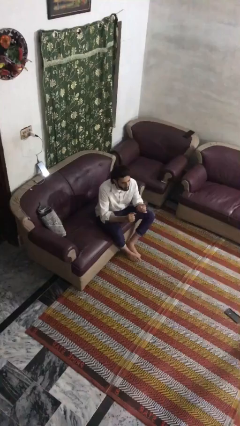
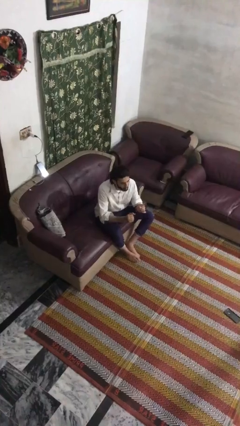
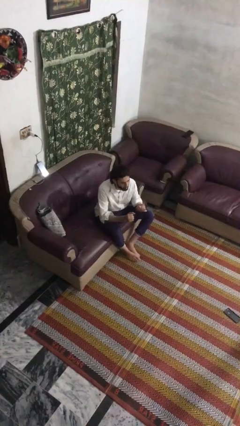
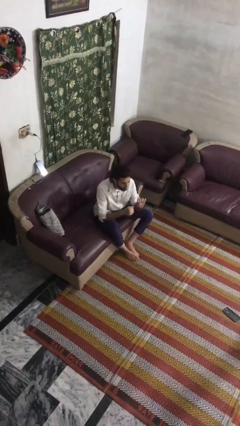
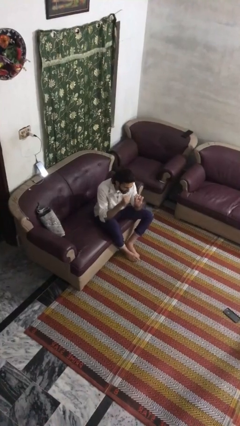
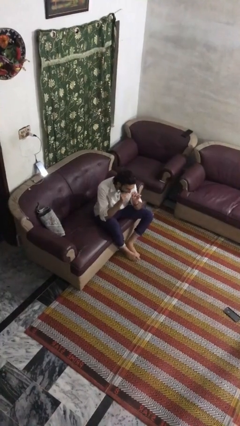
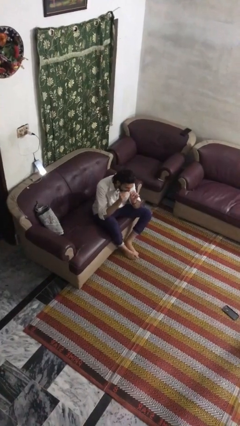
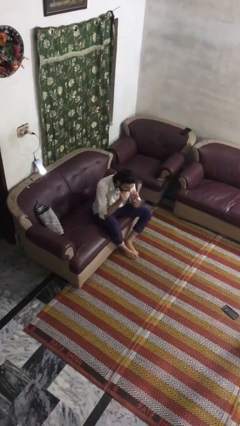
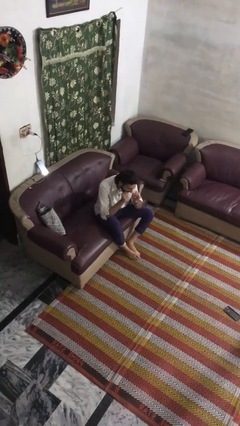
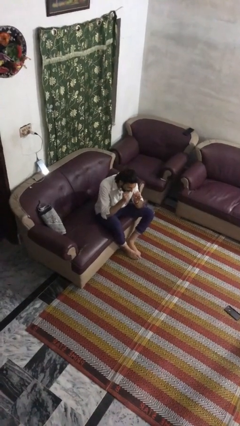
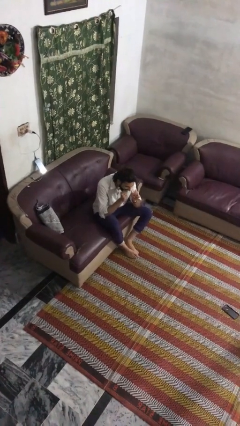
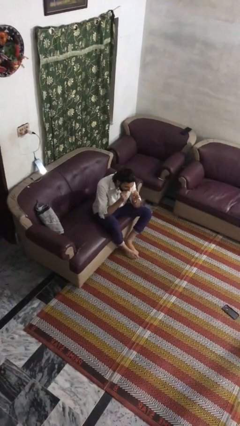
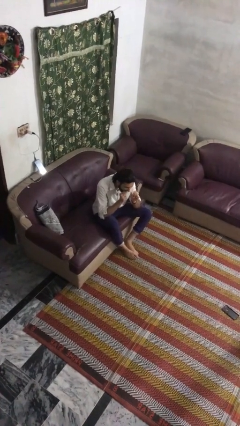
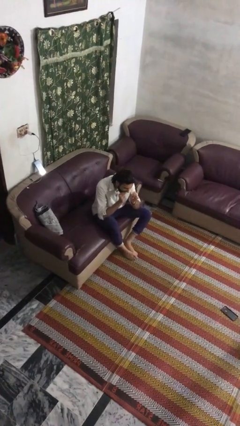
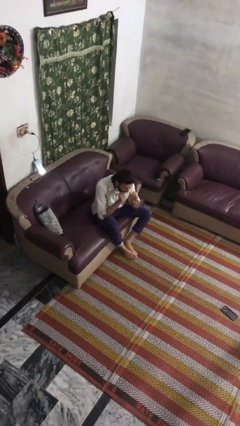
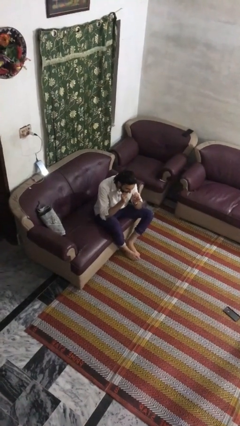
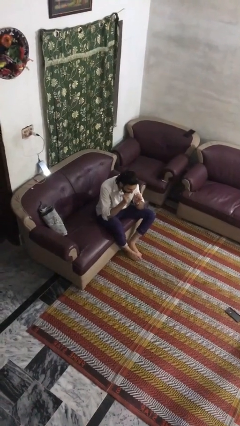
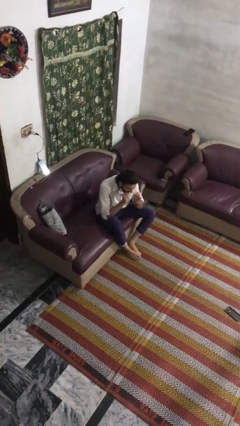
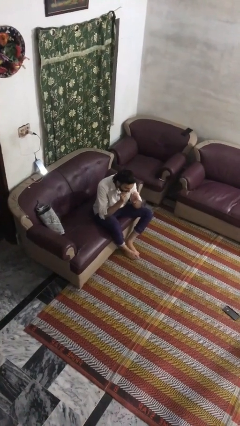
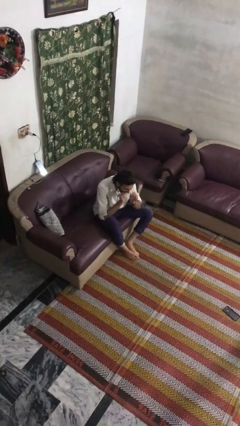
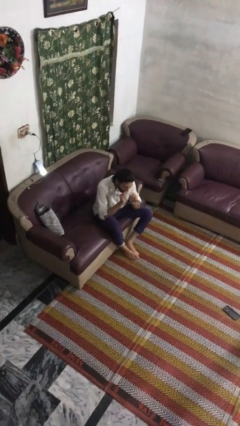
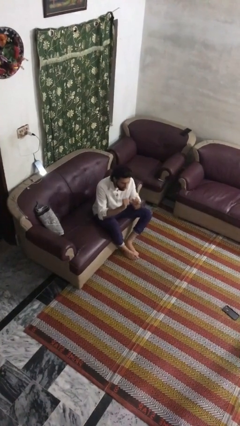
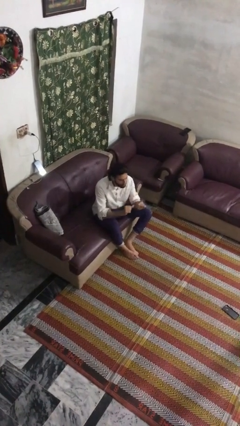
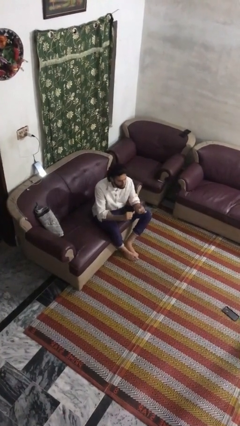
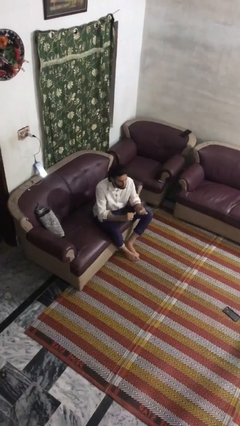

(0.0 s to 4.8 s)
person flosses

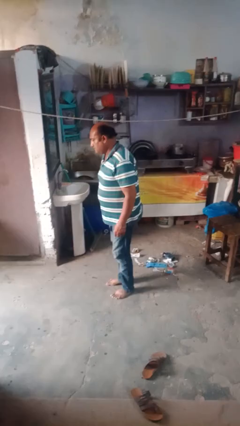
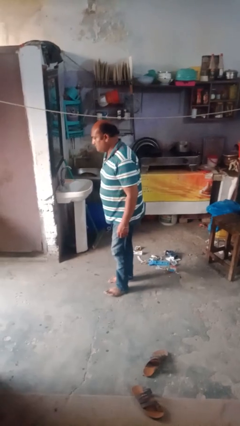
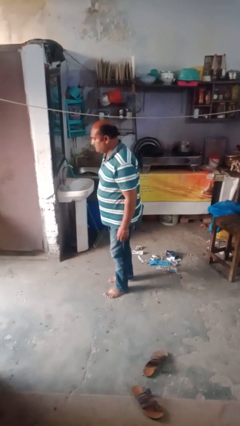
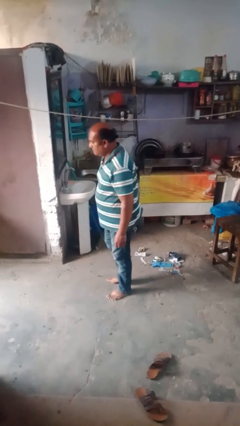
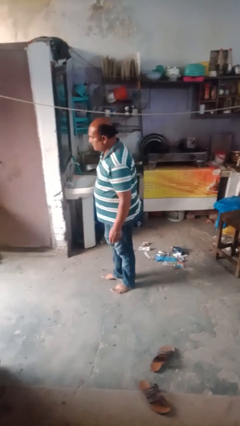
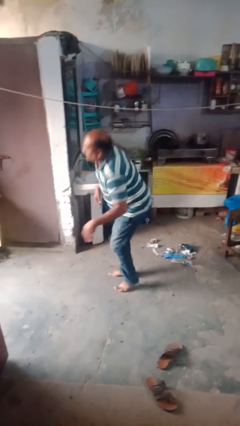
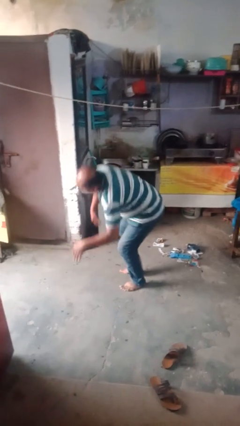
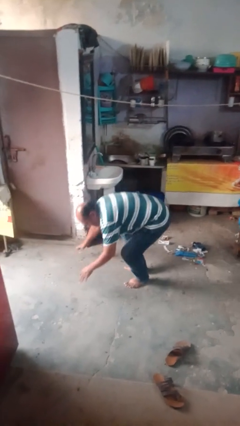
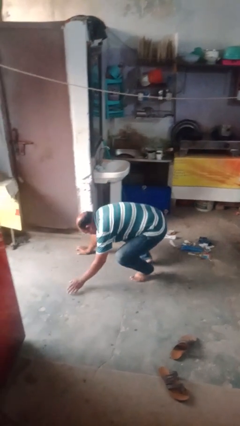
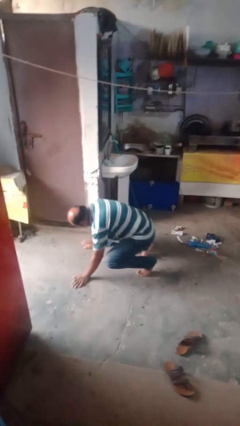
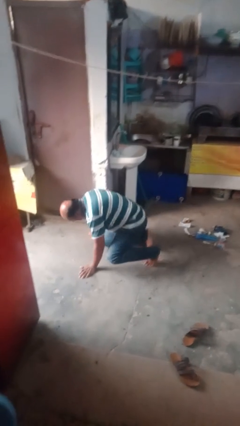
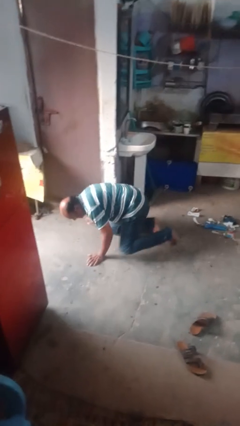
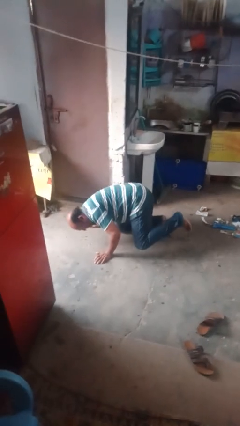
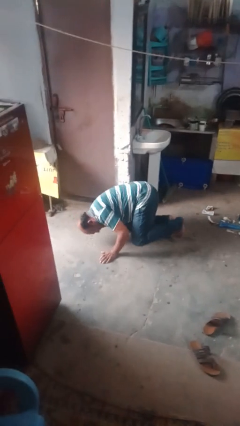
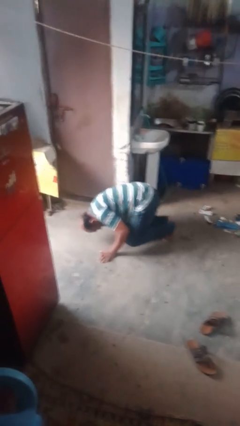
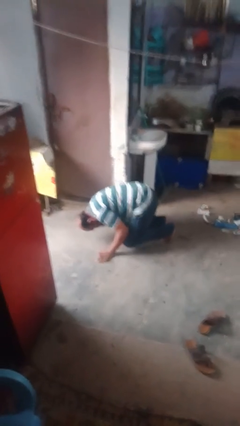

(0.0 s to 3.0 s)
person trips on object on floor

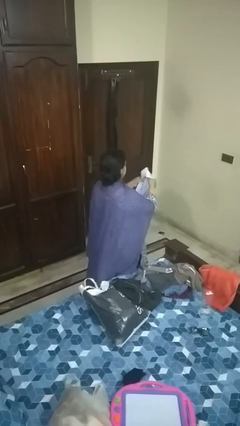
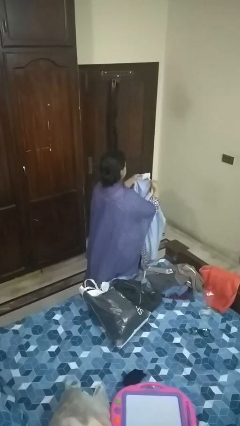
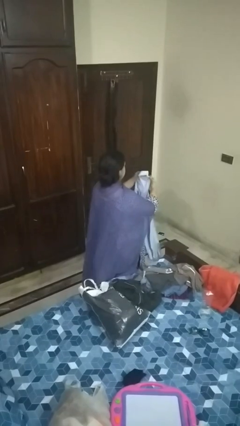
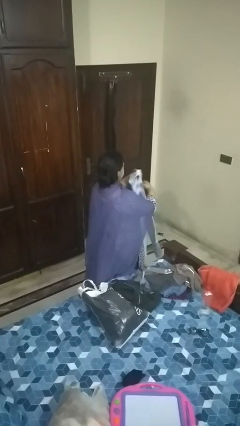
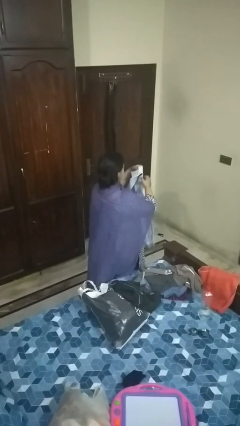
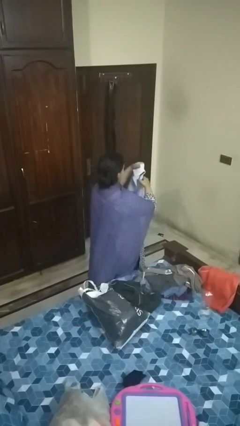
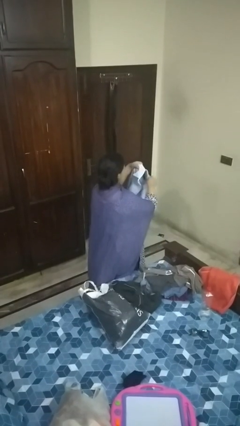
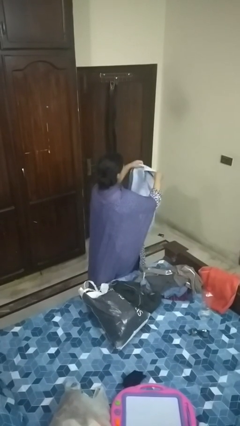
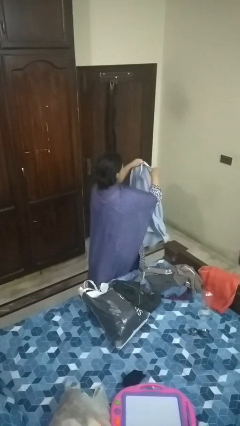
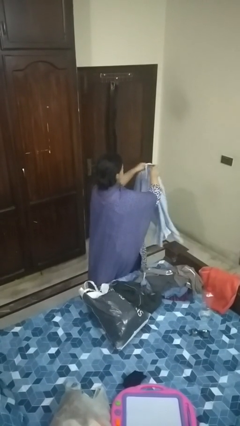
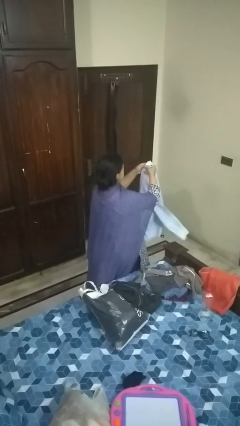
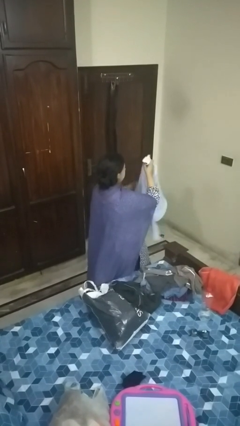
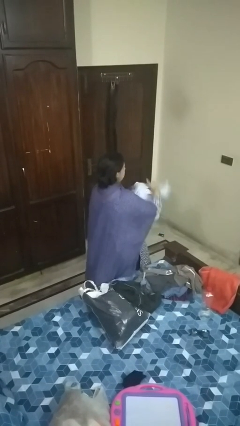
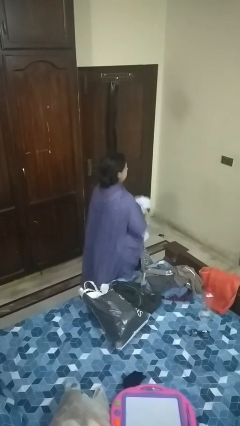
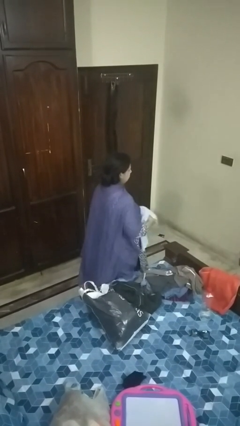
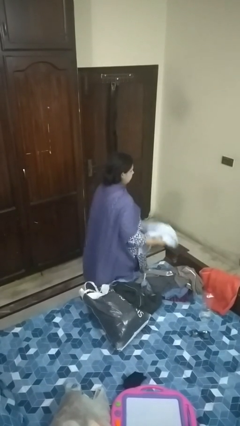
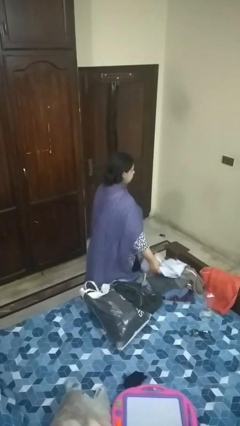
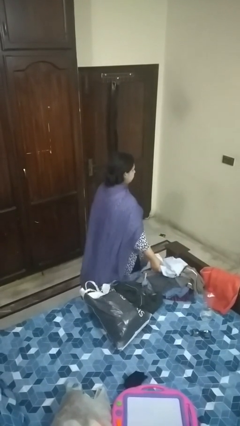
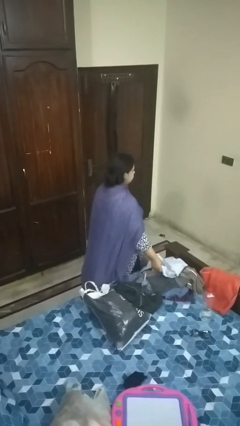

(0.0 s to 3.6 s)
person folds shirt

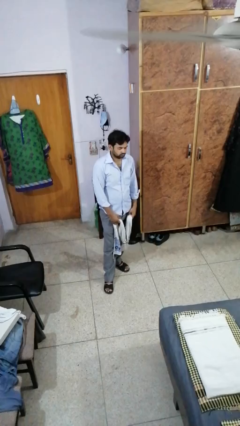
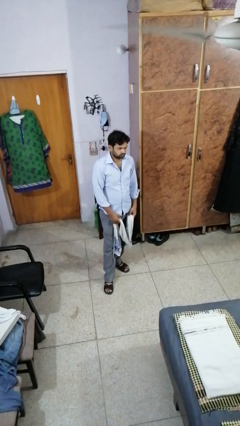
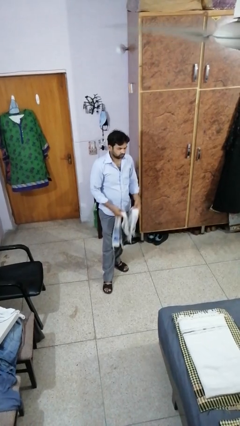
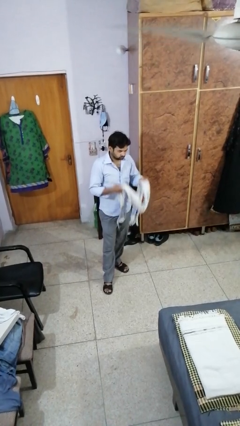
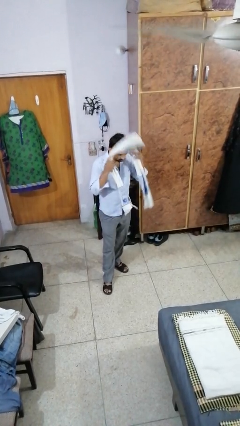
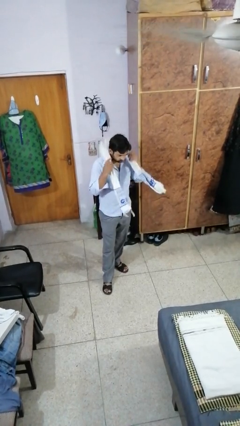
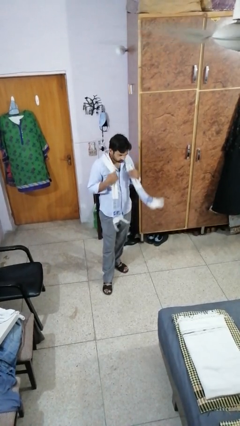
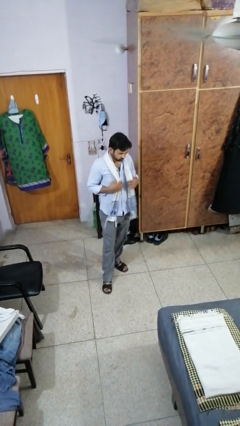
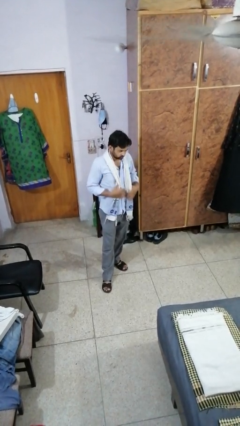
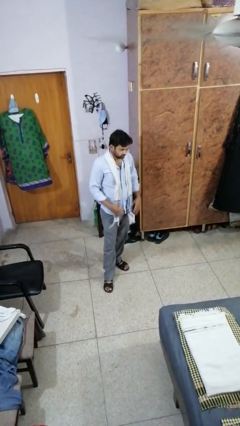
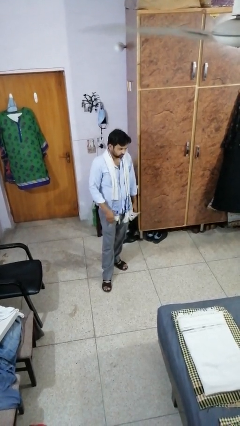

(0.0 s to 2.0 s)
person puts on scarf

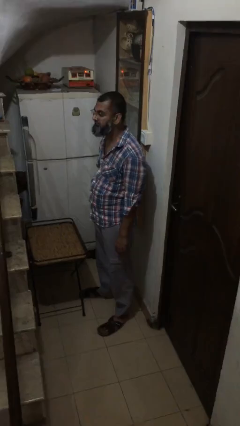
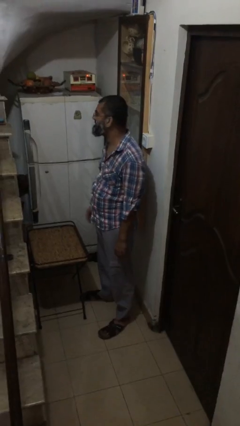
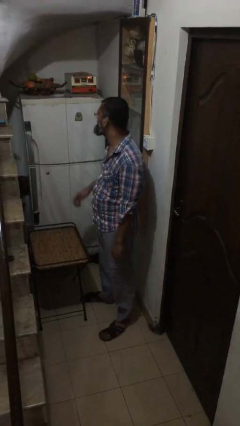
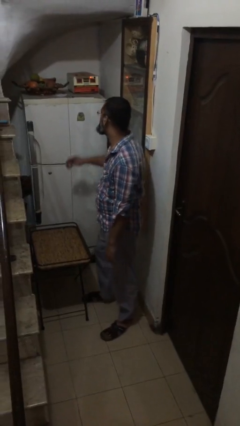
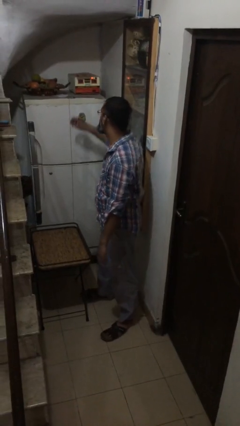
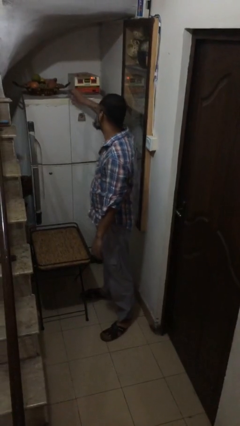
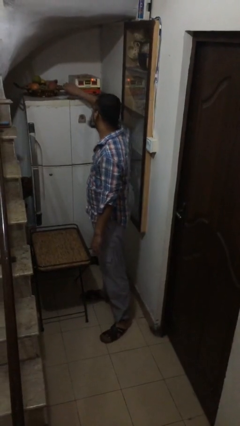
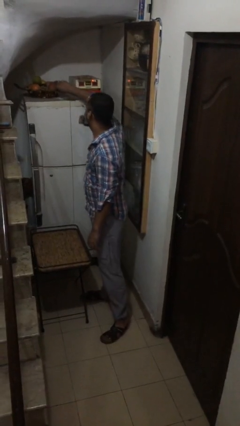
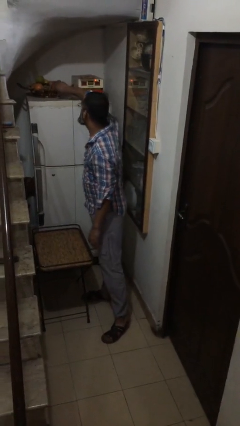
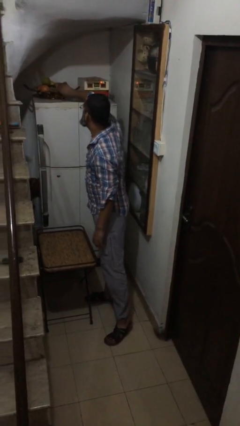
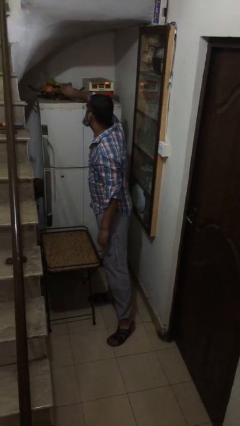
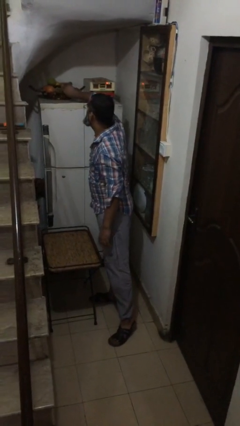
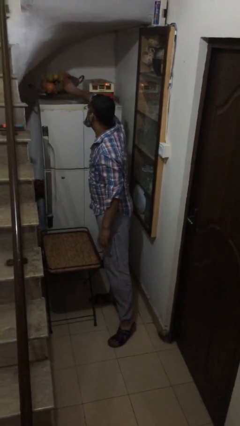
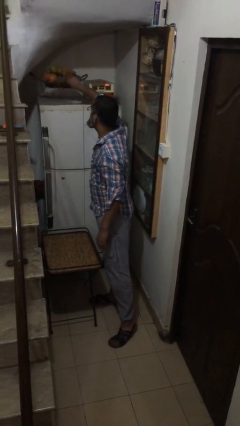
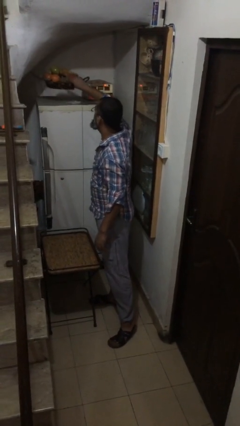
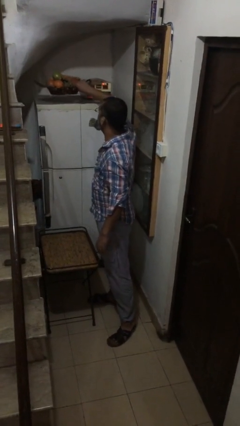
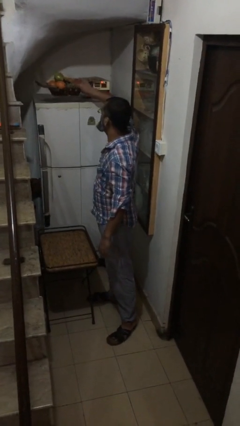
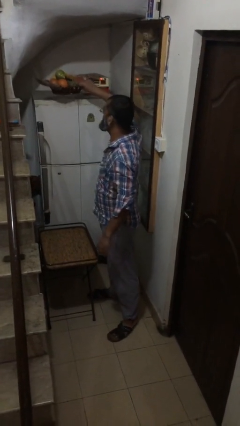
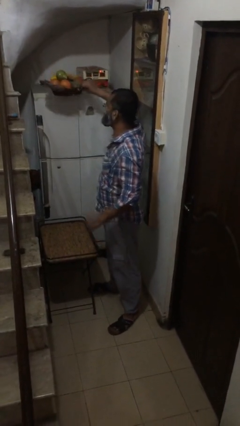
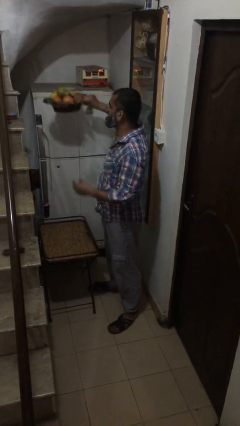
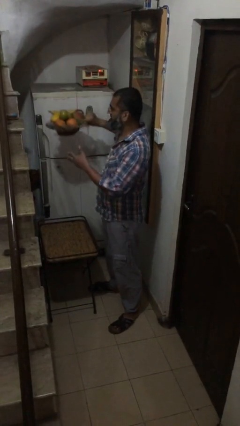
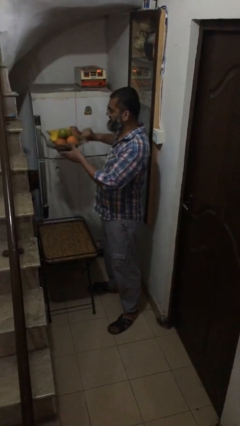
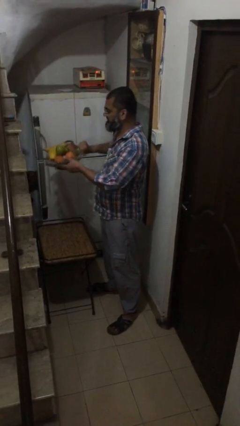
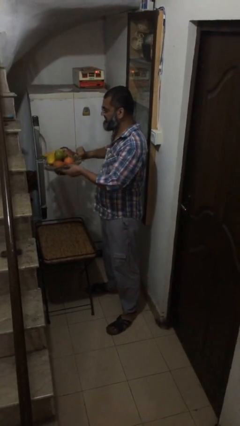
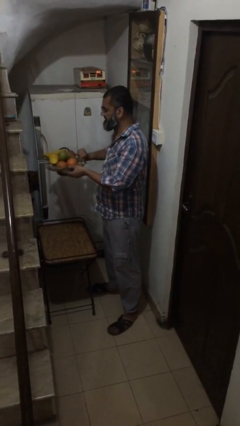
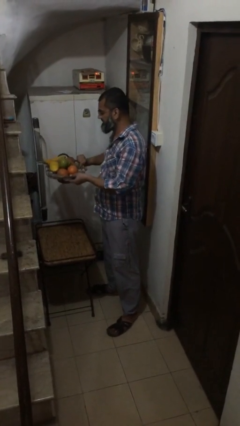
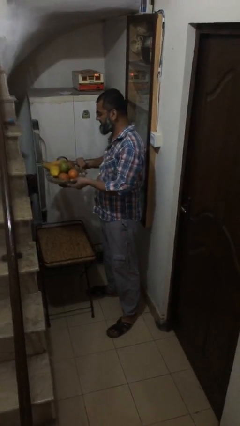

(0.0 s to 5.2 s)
person picks up object from shelf
